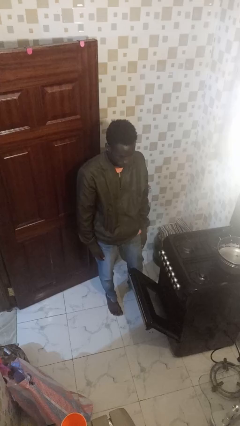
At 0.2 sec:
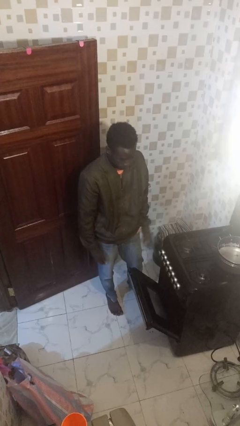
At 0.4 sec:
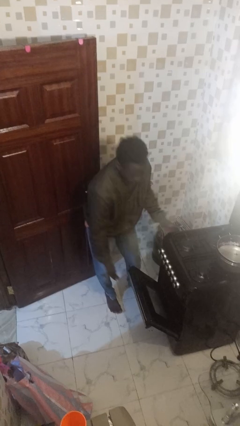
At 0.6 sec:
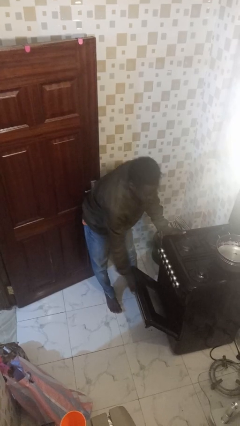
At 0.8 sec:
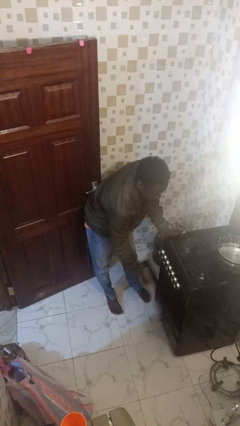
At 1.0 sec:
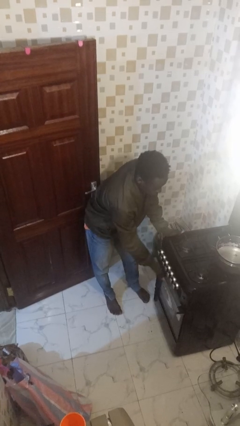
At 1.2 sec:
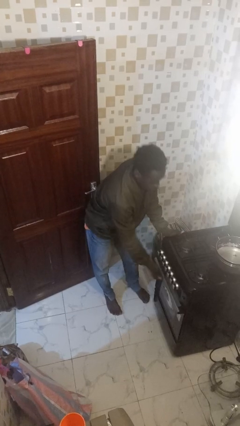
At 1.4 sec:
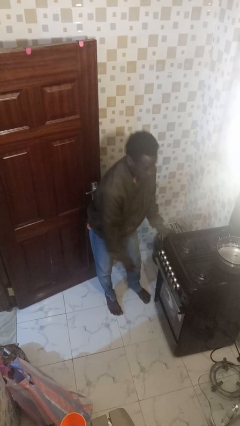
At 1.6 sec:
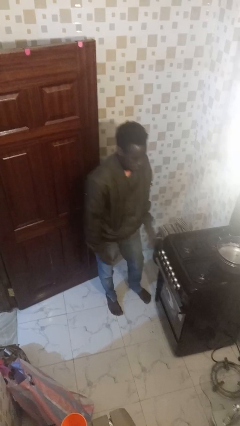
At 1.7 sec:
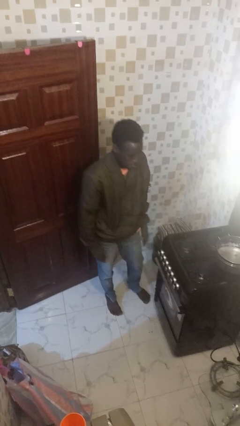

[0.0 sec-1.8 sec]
person closes oven door

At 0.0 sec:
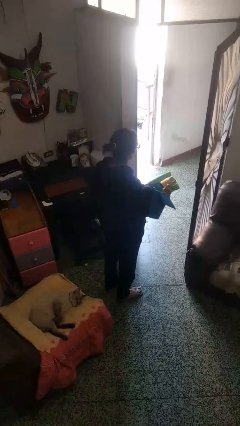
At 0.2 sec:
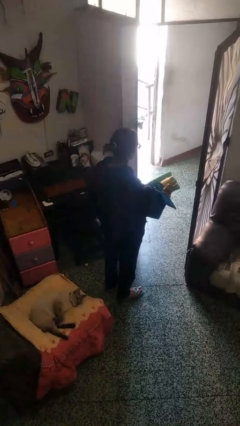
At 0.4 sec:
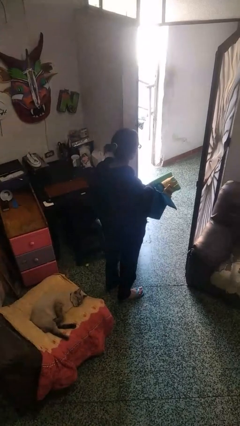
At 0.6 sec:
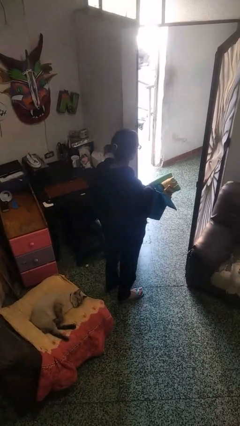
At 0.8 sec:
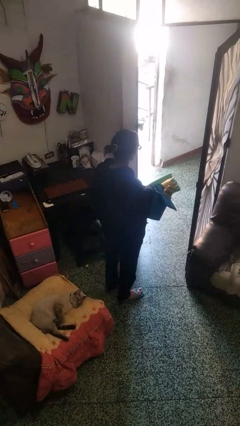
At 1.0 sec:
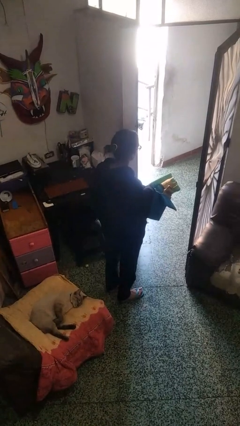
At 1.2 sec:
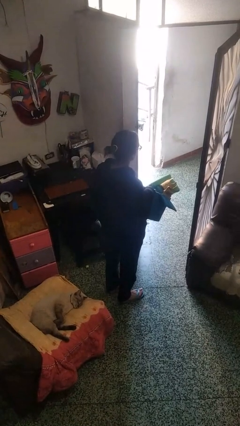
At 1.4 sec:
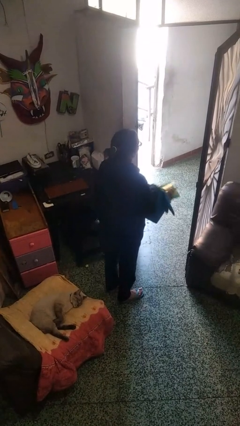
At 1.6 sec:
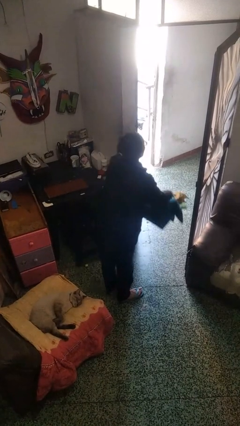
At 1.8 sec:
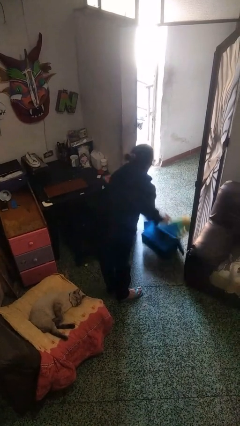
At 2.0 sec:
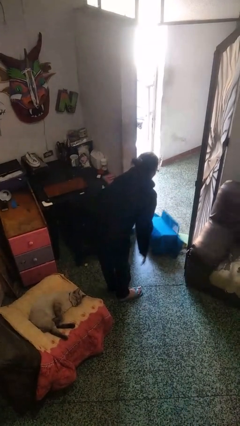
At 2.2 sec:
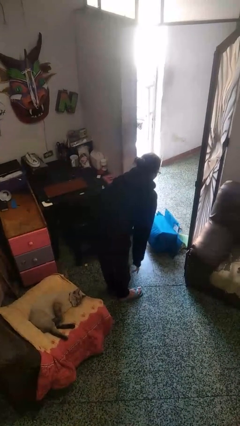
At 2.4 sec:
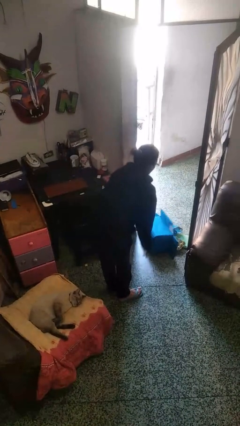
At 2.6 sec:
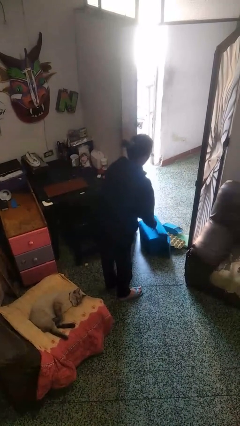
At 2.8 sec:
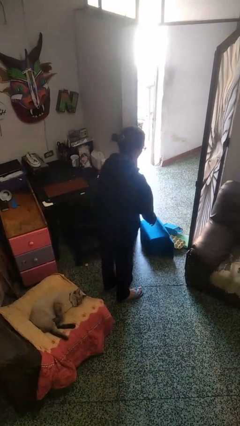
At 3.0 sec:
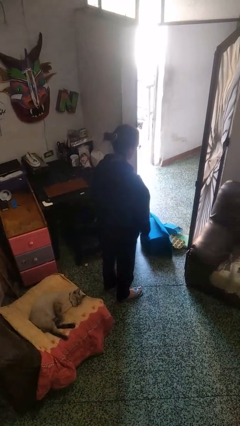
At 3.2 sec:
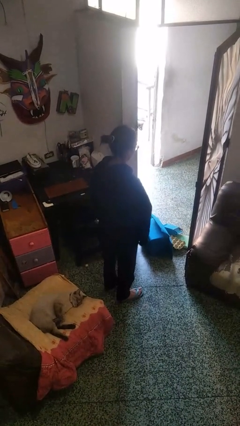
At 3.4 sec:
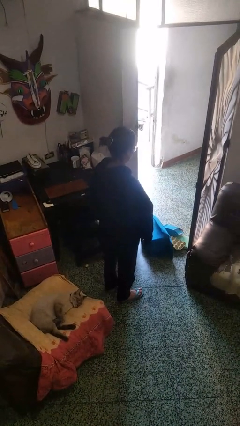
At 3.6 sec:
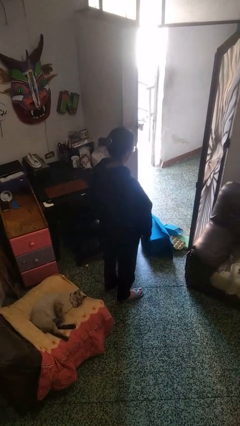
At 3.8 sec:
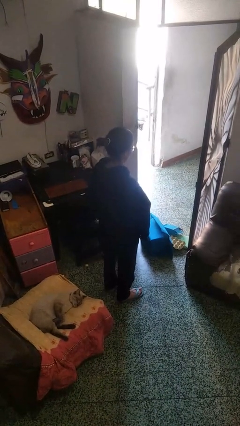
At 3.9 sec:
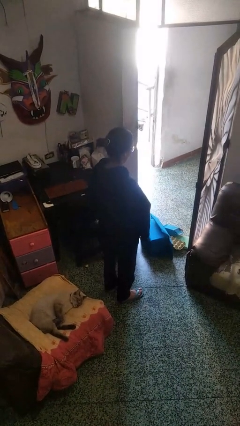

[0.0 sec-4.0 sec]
person unloads box onto floor

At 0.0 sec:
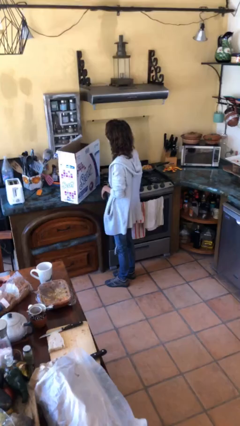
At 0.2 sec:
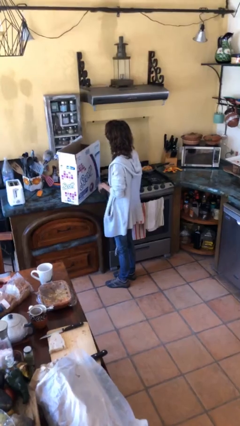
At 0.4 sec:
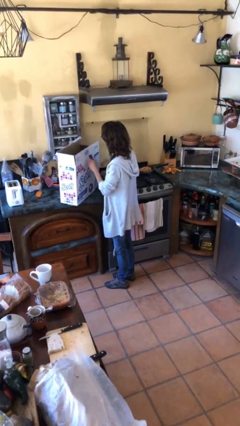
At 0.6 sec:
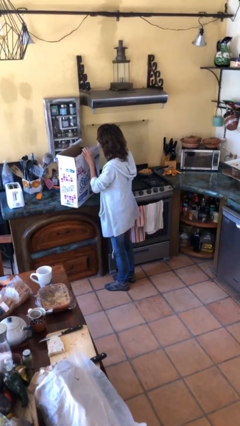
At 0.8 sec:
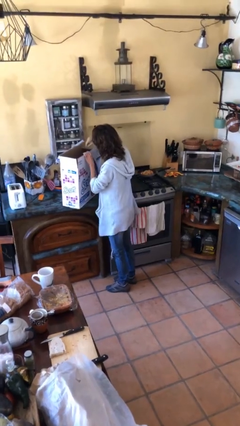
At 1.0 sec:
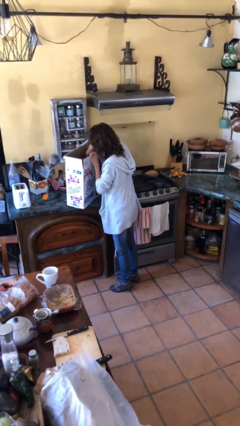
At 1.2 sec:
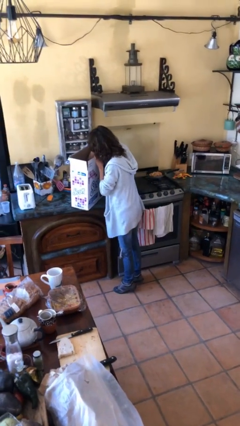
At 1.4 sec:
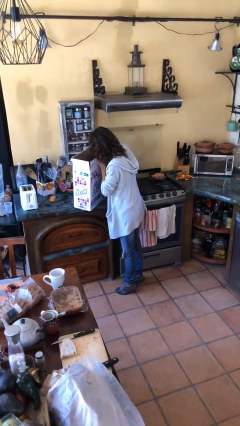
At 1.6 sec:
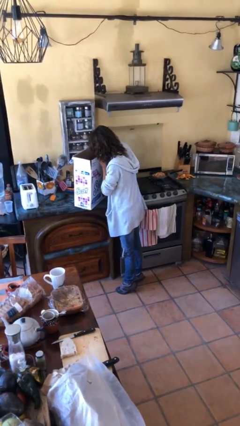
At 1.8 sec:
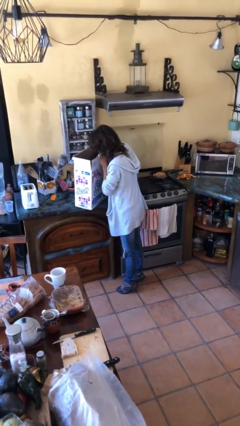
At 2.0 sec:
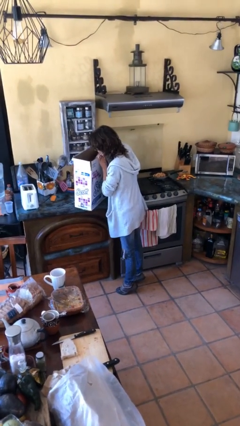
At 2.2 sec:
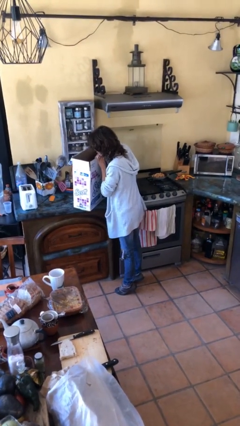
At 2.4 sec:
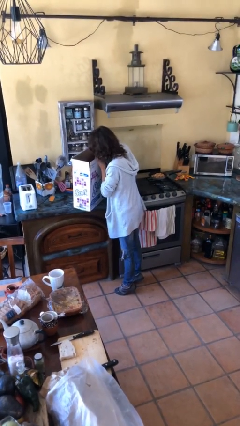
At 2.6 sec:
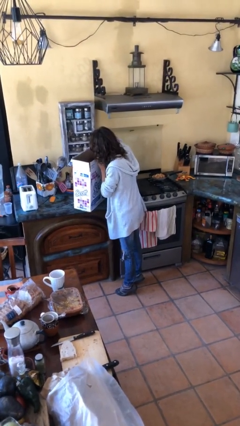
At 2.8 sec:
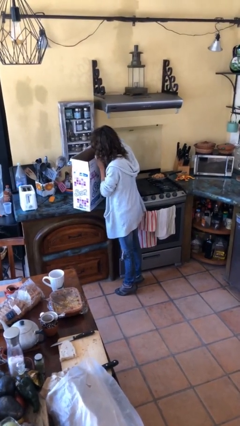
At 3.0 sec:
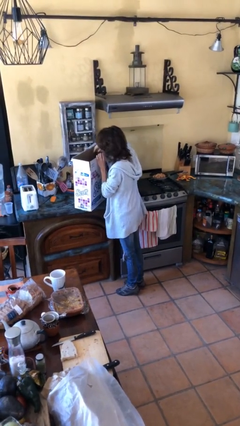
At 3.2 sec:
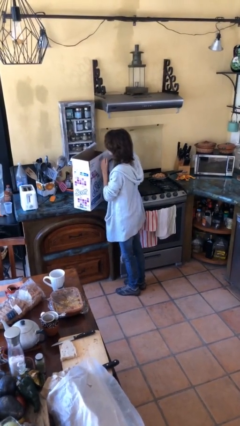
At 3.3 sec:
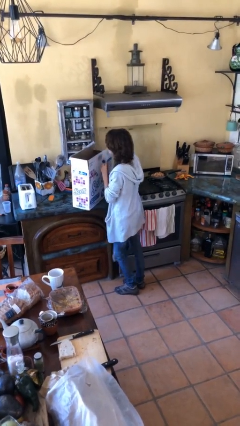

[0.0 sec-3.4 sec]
person searches in box

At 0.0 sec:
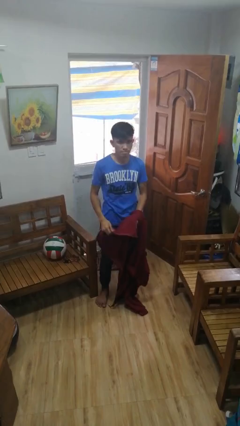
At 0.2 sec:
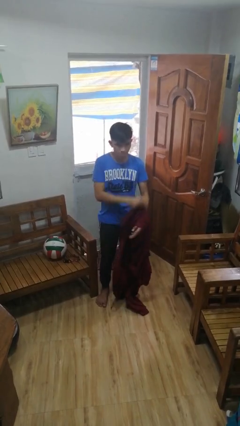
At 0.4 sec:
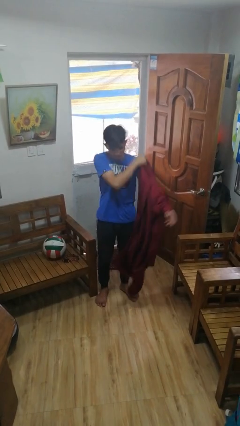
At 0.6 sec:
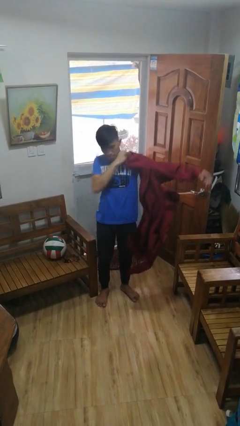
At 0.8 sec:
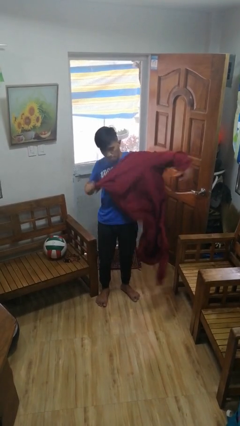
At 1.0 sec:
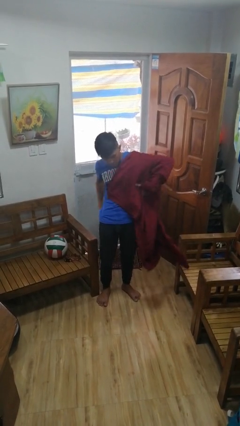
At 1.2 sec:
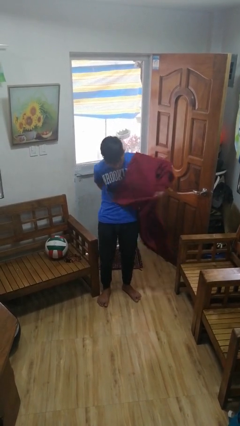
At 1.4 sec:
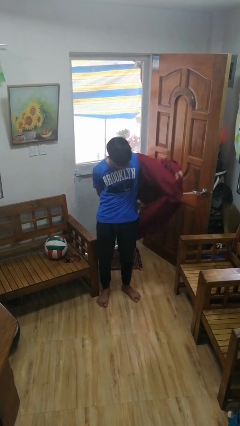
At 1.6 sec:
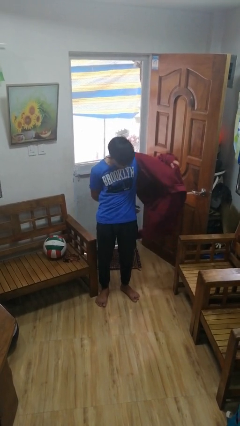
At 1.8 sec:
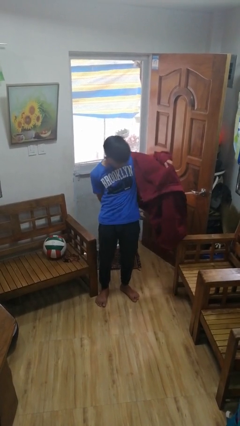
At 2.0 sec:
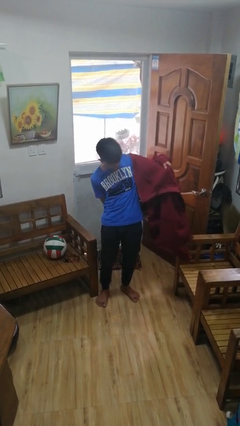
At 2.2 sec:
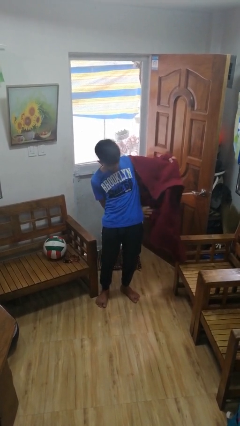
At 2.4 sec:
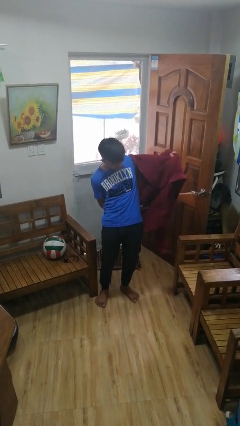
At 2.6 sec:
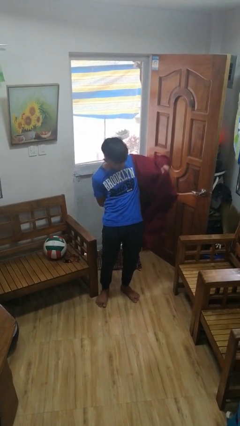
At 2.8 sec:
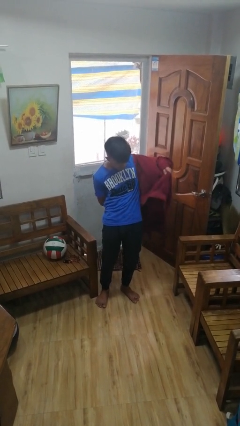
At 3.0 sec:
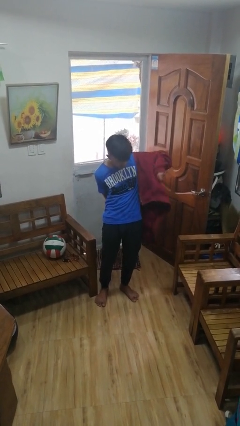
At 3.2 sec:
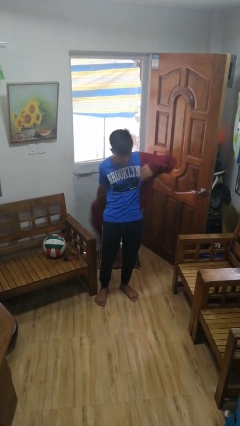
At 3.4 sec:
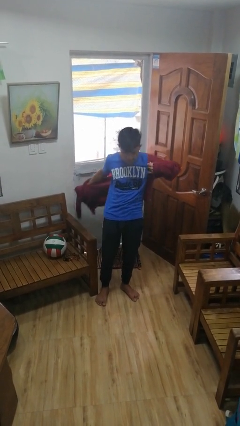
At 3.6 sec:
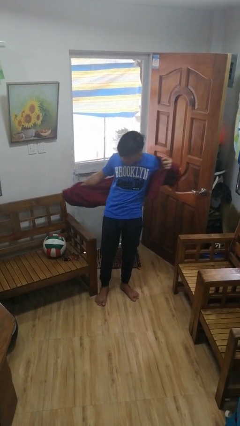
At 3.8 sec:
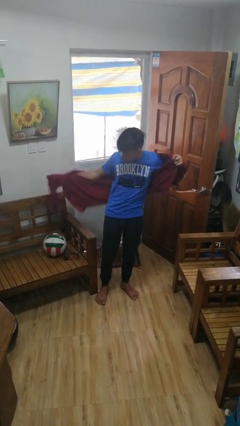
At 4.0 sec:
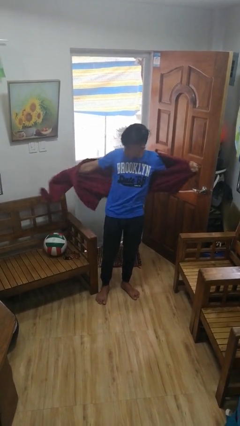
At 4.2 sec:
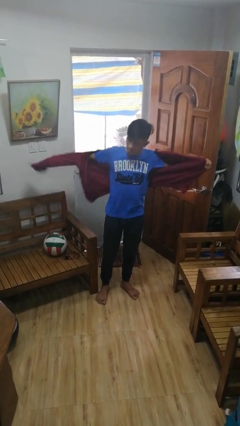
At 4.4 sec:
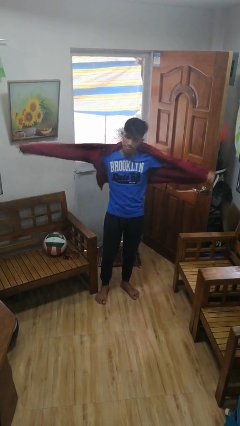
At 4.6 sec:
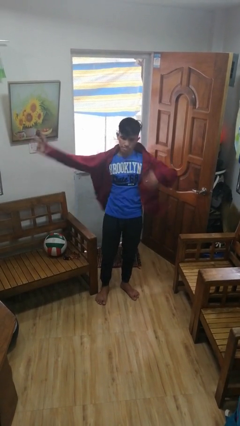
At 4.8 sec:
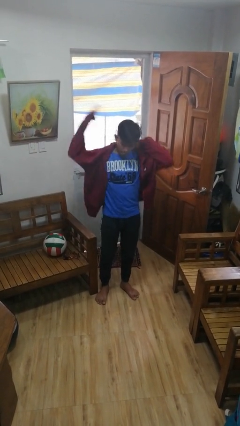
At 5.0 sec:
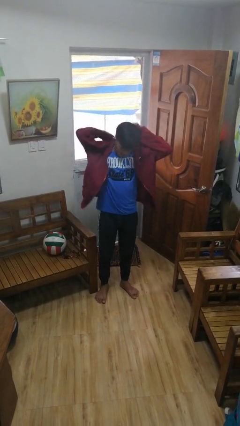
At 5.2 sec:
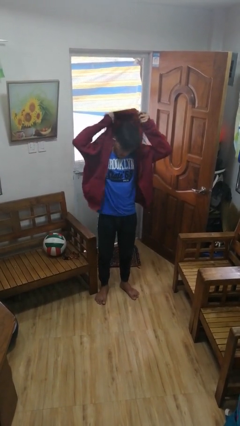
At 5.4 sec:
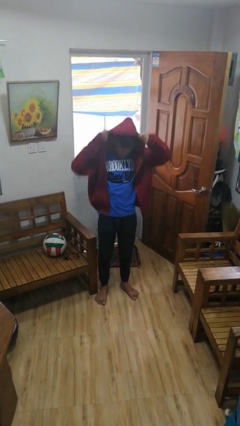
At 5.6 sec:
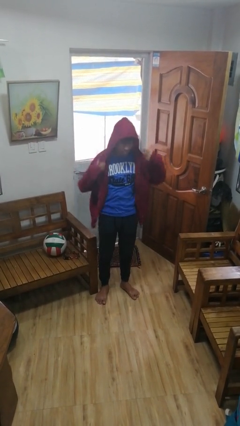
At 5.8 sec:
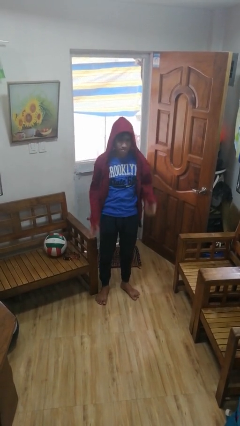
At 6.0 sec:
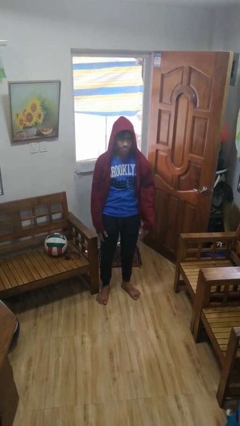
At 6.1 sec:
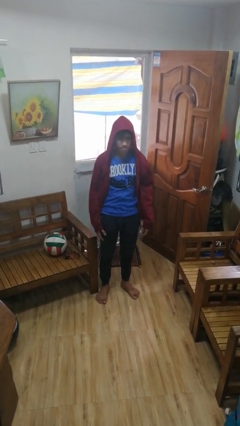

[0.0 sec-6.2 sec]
person puts on hoodie

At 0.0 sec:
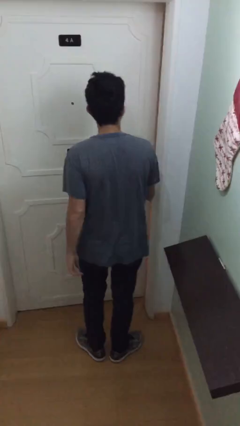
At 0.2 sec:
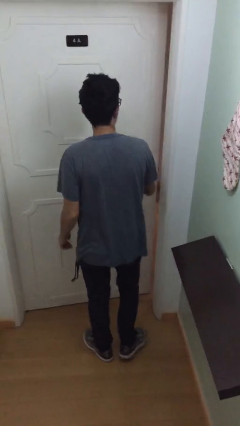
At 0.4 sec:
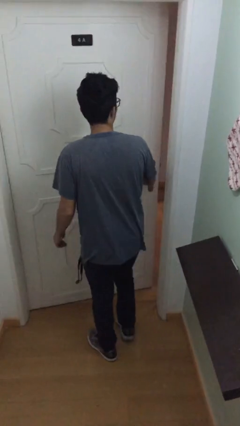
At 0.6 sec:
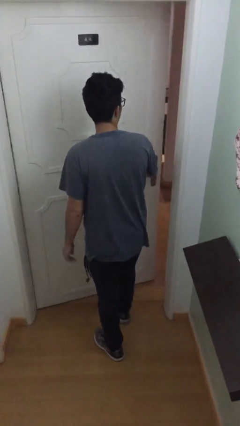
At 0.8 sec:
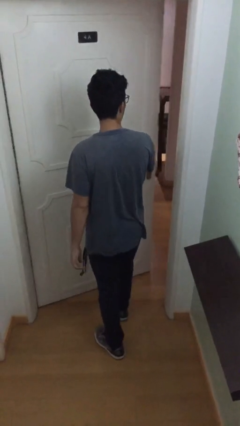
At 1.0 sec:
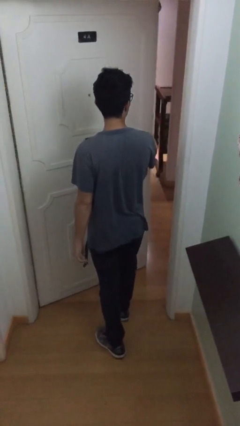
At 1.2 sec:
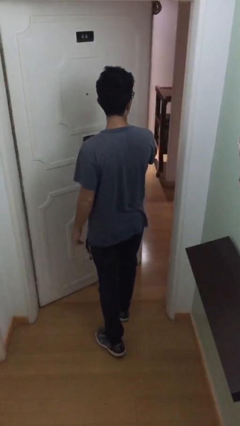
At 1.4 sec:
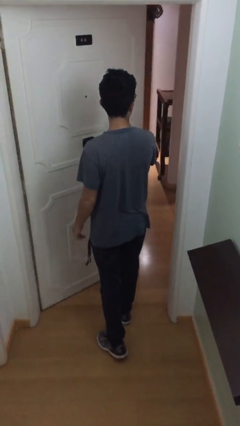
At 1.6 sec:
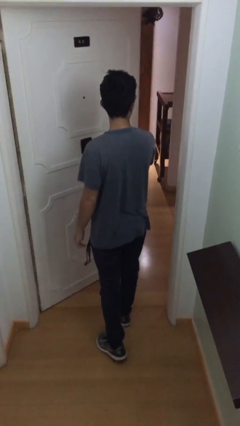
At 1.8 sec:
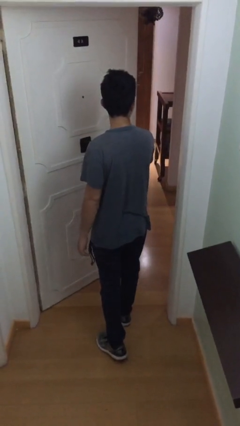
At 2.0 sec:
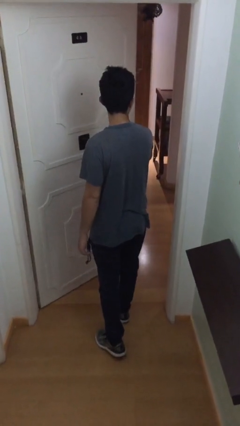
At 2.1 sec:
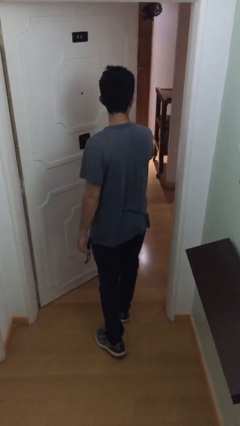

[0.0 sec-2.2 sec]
person opens facility door
